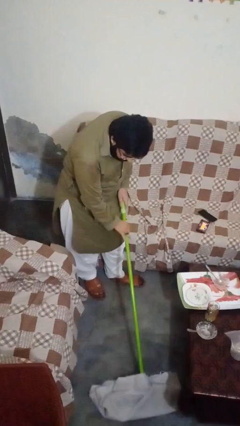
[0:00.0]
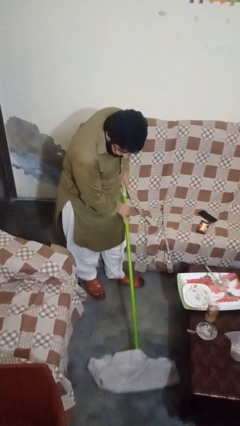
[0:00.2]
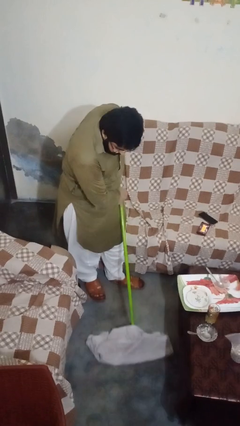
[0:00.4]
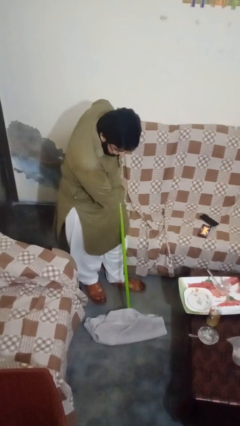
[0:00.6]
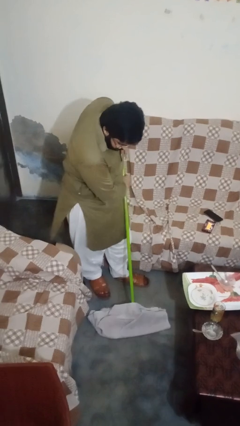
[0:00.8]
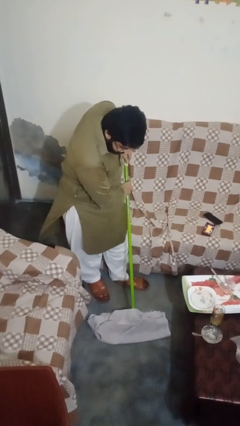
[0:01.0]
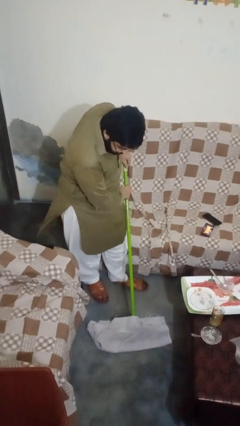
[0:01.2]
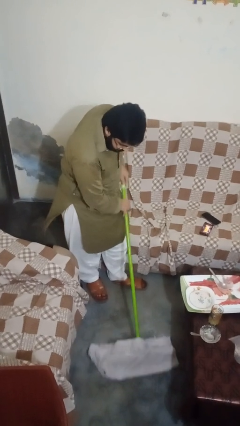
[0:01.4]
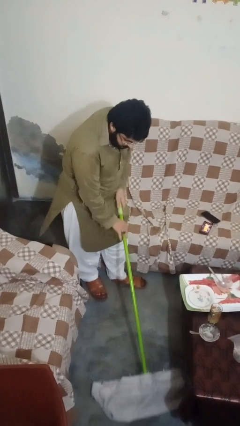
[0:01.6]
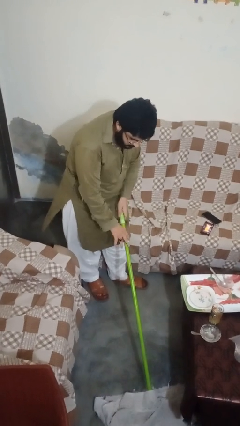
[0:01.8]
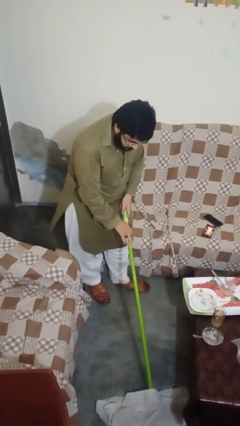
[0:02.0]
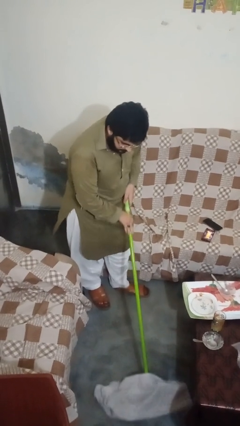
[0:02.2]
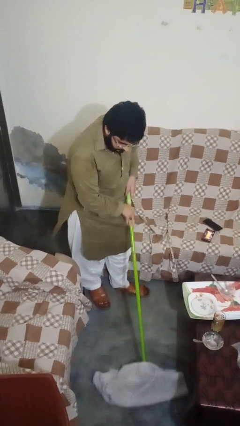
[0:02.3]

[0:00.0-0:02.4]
person mops

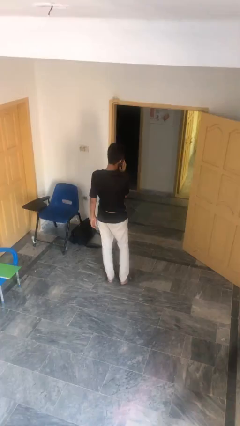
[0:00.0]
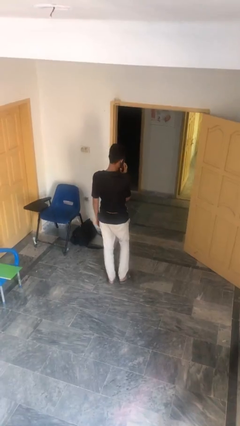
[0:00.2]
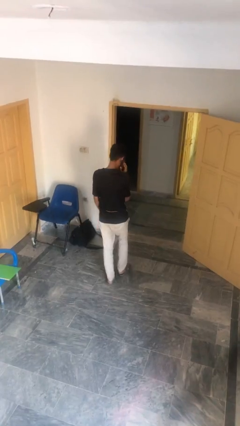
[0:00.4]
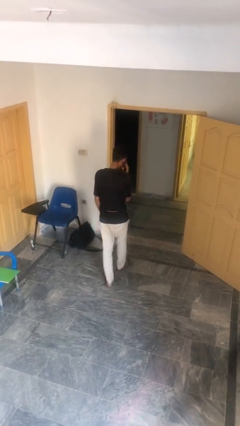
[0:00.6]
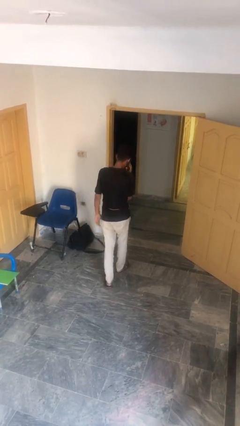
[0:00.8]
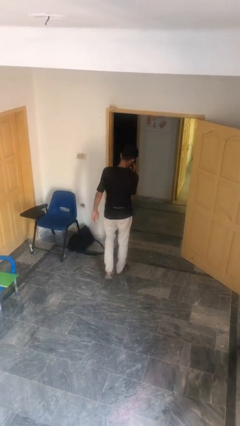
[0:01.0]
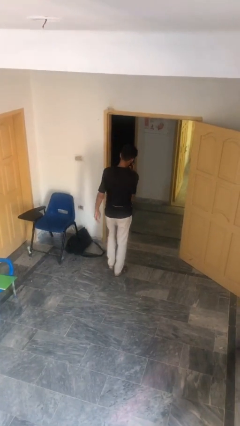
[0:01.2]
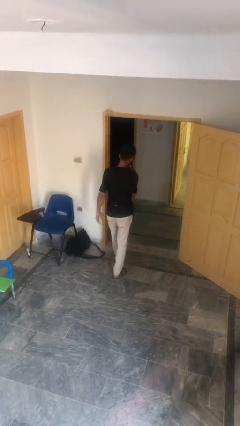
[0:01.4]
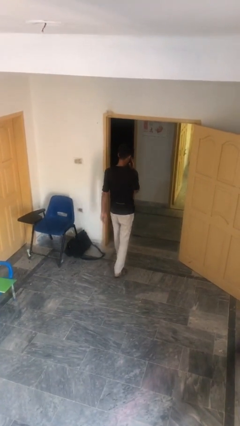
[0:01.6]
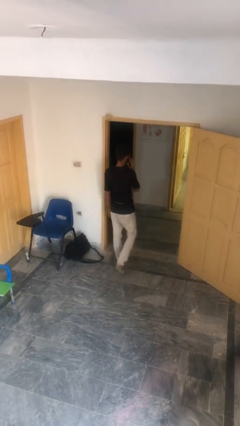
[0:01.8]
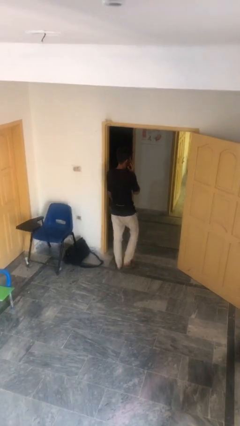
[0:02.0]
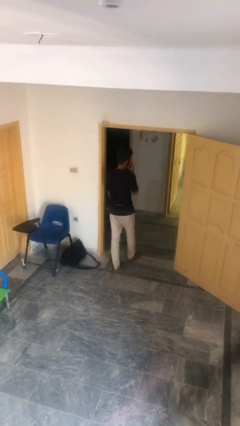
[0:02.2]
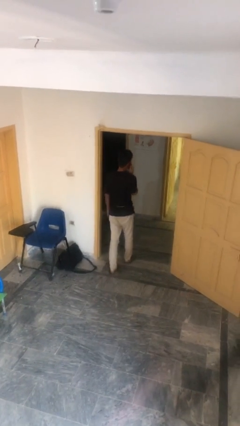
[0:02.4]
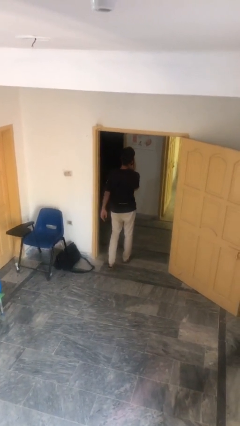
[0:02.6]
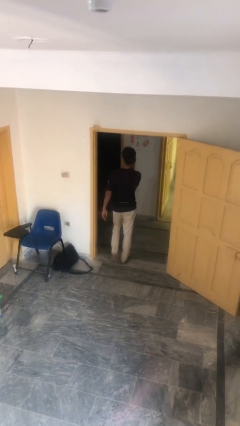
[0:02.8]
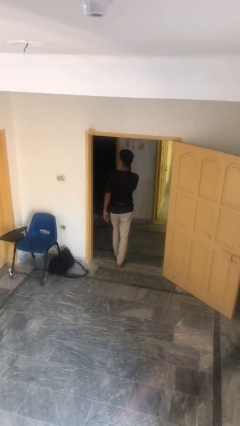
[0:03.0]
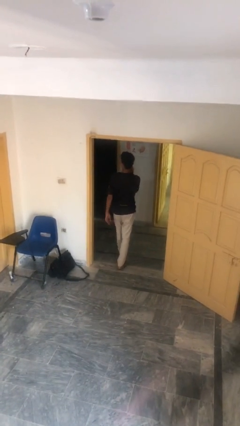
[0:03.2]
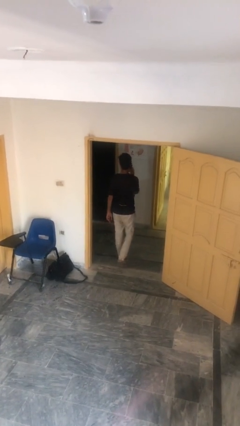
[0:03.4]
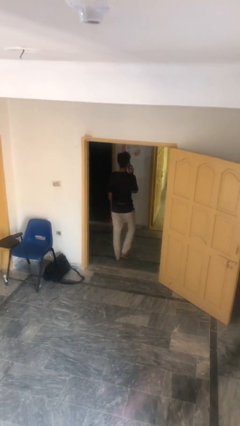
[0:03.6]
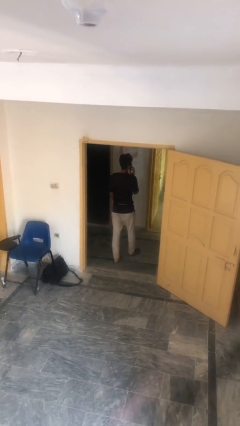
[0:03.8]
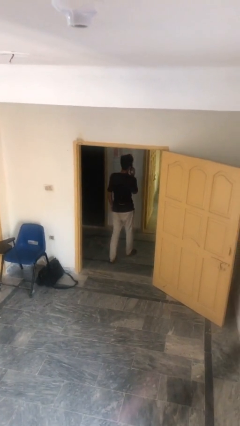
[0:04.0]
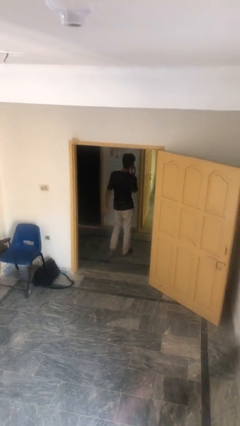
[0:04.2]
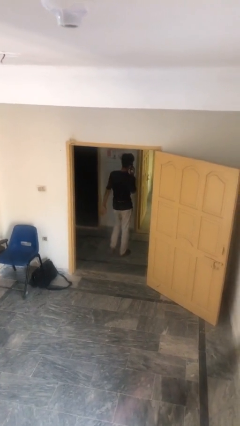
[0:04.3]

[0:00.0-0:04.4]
person exits scene through structure

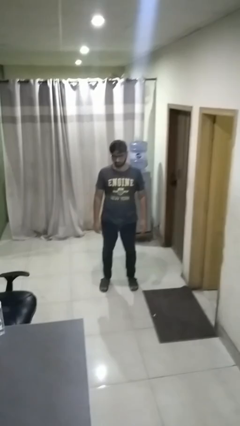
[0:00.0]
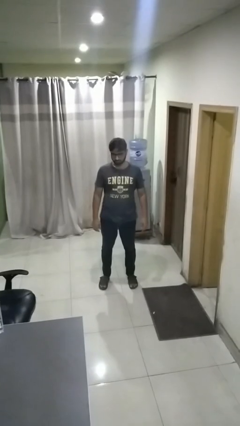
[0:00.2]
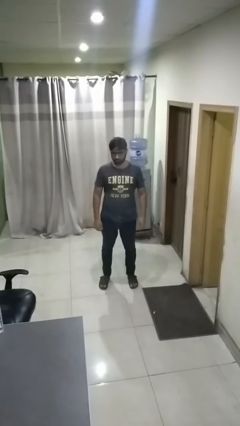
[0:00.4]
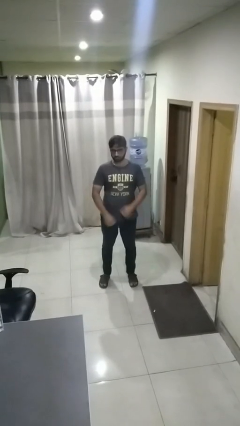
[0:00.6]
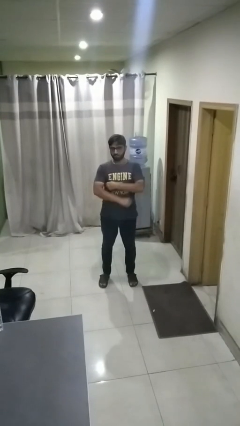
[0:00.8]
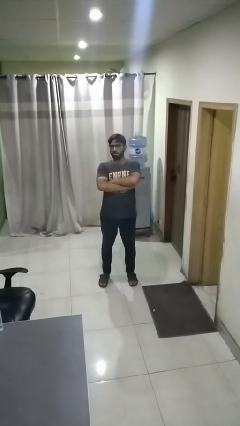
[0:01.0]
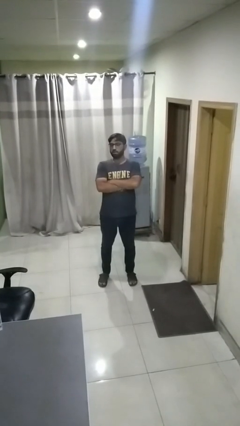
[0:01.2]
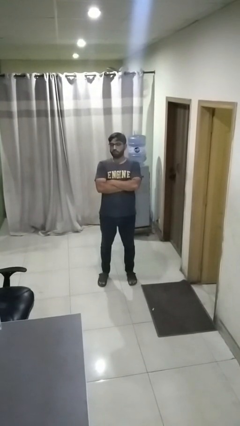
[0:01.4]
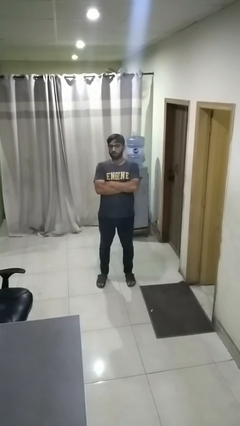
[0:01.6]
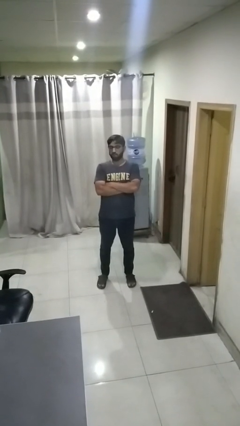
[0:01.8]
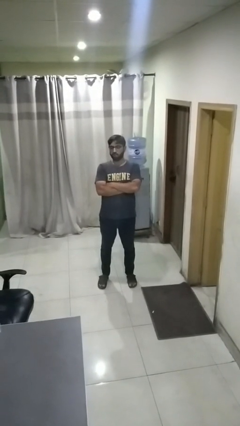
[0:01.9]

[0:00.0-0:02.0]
person crosses arms

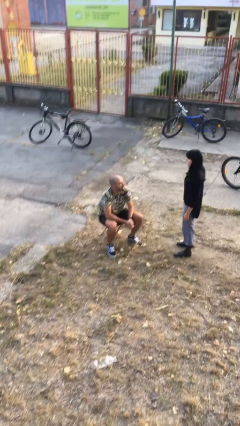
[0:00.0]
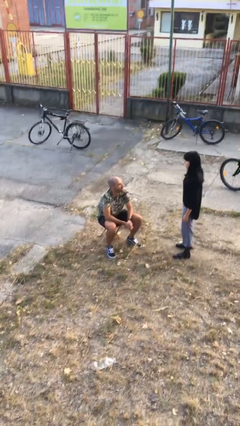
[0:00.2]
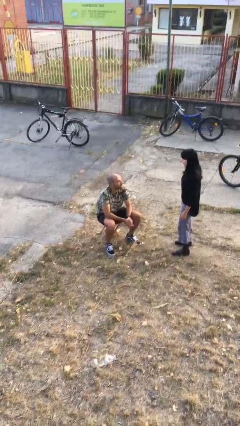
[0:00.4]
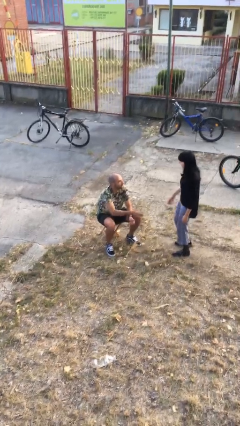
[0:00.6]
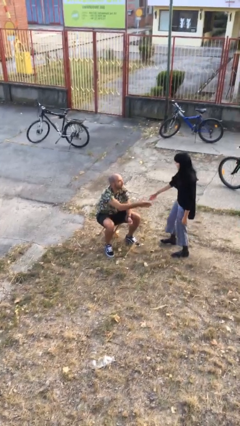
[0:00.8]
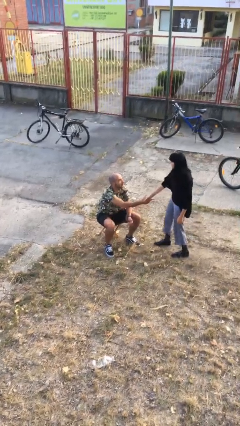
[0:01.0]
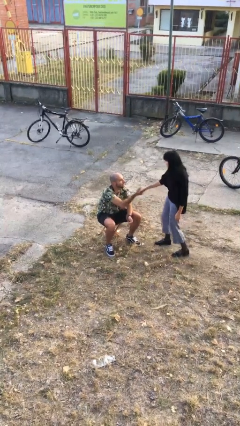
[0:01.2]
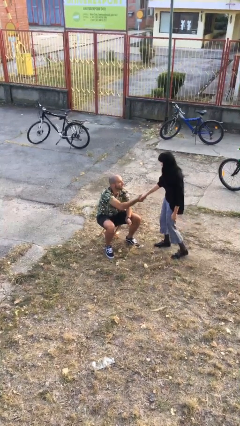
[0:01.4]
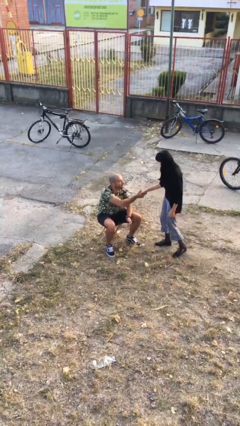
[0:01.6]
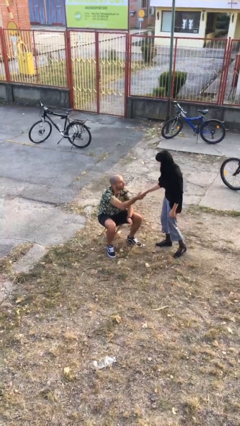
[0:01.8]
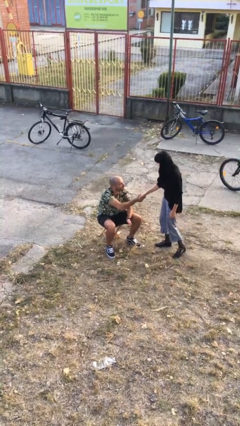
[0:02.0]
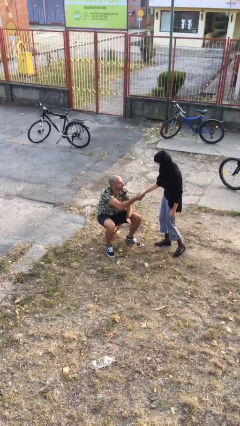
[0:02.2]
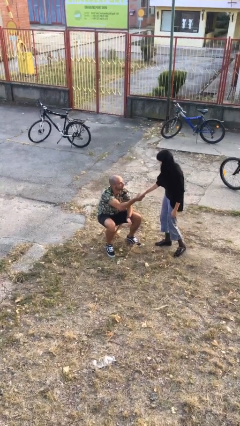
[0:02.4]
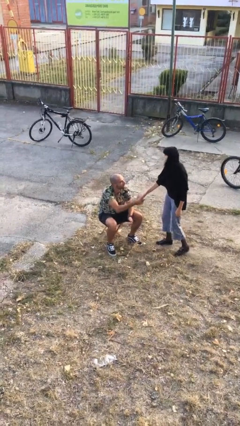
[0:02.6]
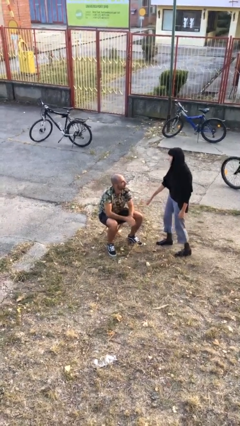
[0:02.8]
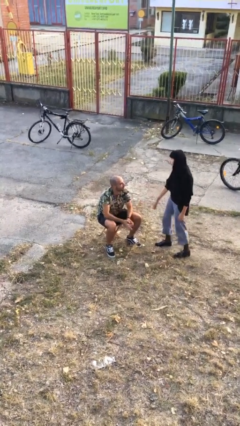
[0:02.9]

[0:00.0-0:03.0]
person shakes hand

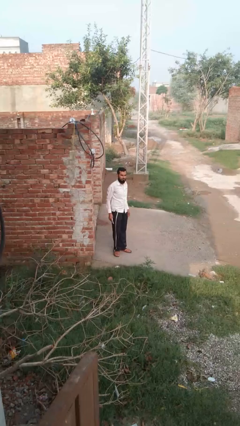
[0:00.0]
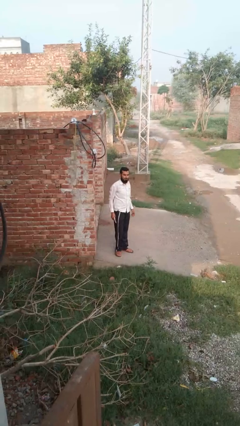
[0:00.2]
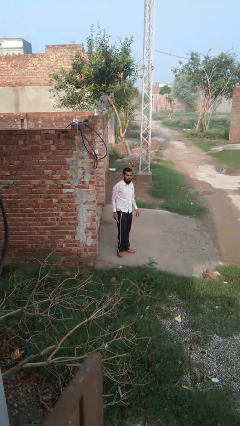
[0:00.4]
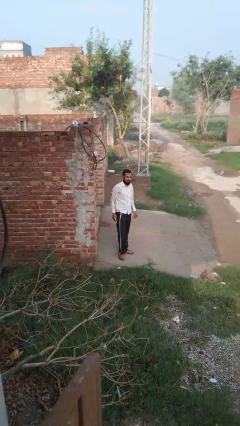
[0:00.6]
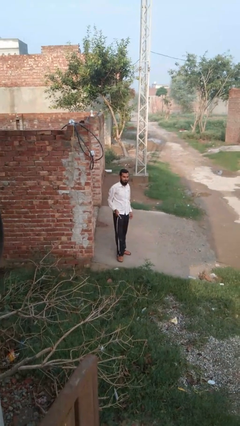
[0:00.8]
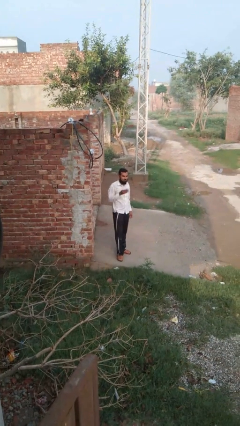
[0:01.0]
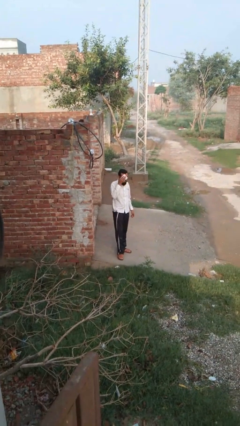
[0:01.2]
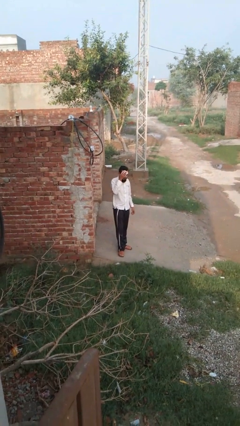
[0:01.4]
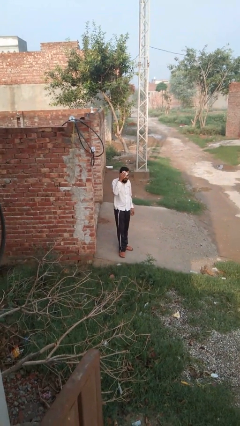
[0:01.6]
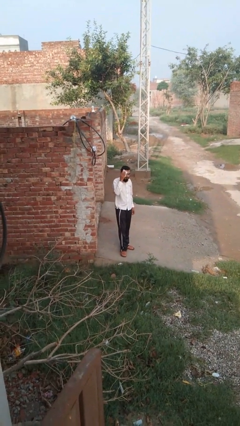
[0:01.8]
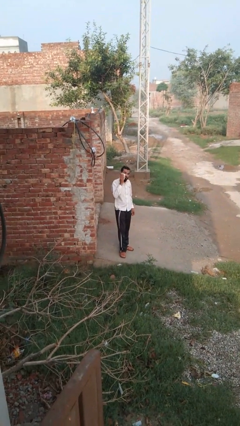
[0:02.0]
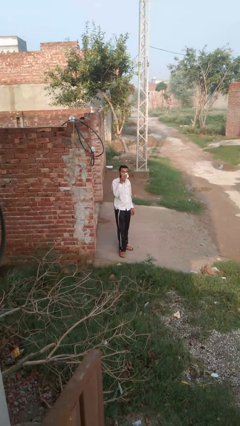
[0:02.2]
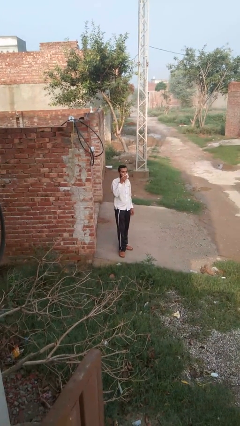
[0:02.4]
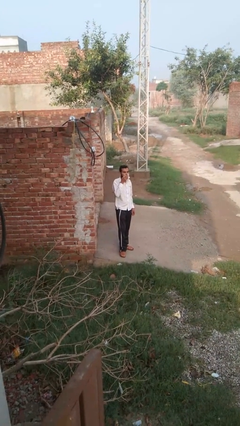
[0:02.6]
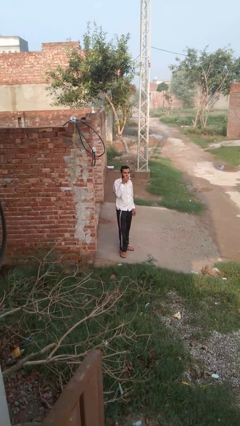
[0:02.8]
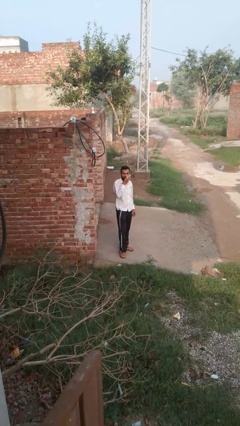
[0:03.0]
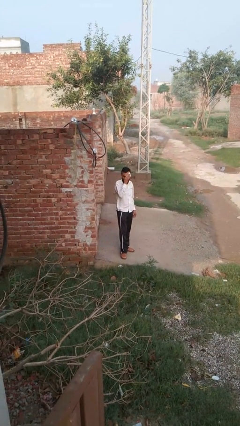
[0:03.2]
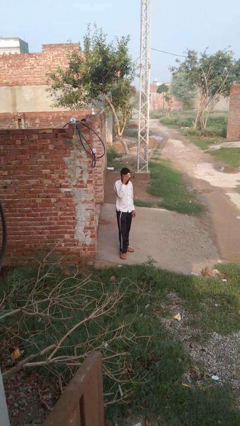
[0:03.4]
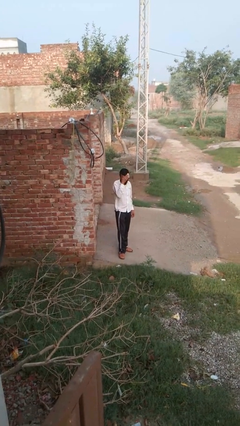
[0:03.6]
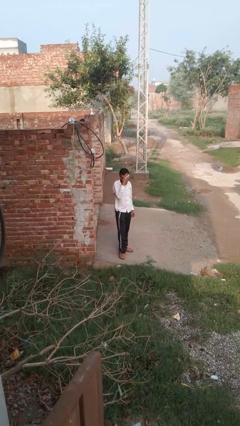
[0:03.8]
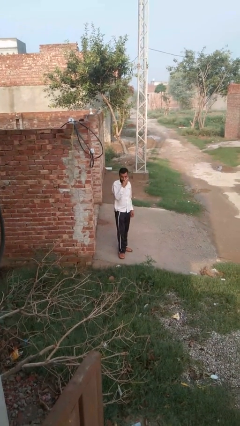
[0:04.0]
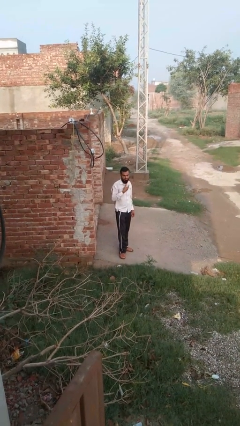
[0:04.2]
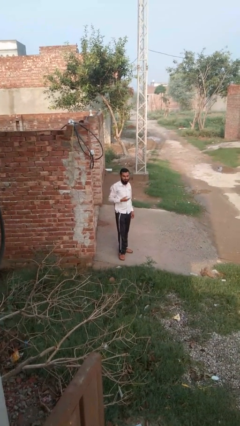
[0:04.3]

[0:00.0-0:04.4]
person wipes mouth with napkin

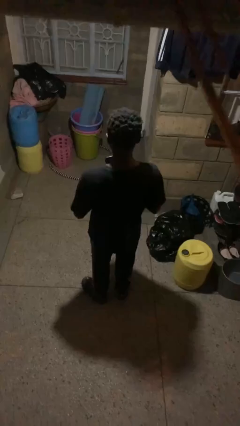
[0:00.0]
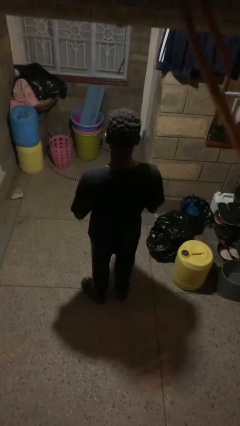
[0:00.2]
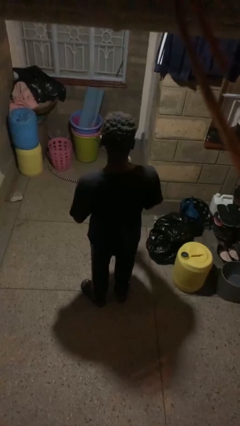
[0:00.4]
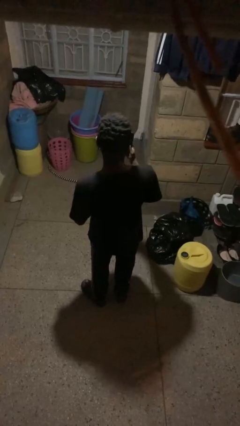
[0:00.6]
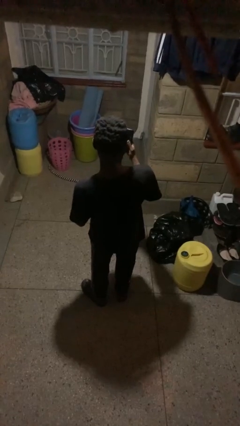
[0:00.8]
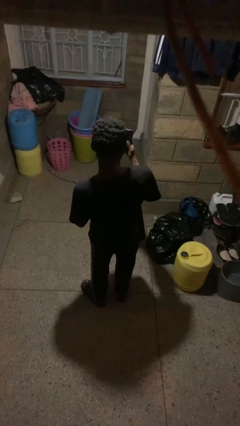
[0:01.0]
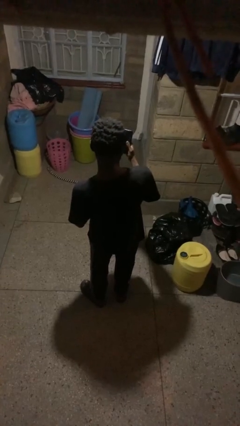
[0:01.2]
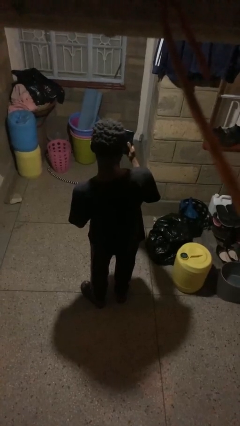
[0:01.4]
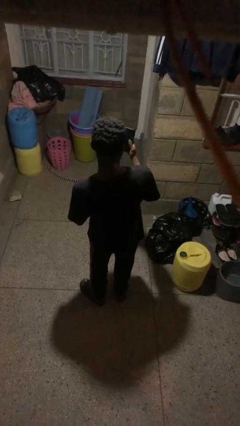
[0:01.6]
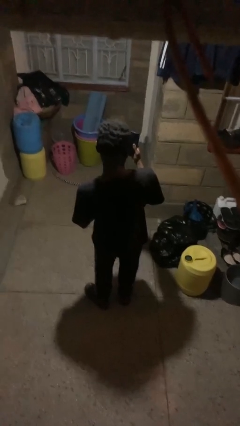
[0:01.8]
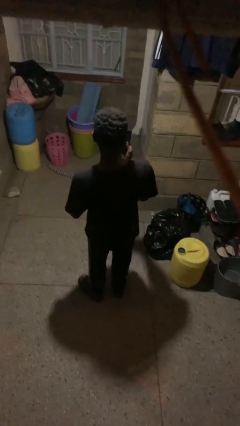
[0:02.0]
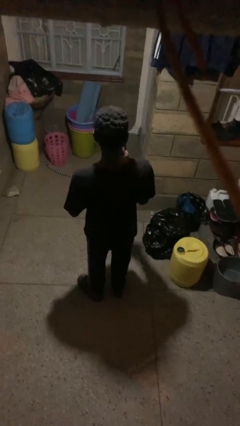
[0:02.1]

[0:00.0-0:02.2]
person takes selfie
